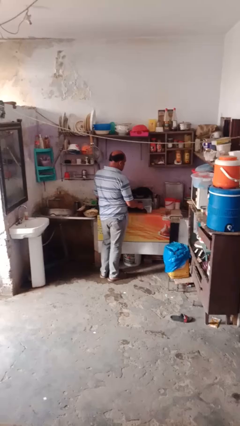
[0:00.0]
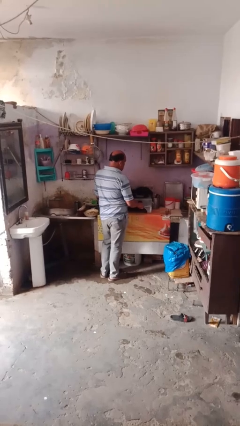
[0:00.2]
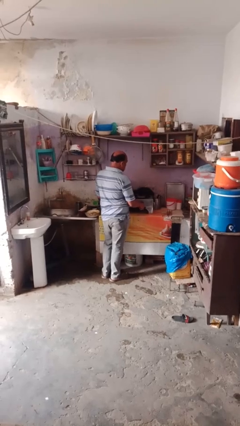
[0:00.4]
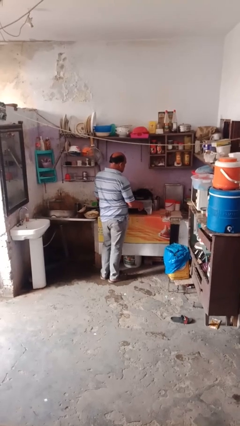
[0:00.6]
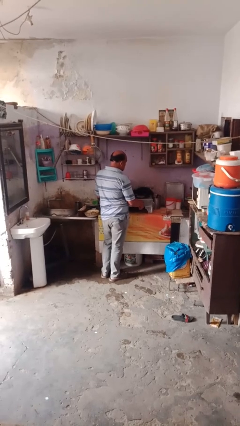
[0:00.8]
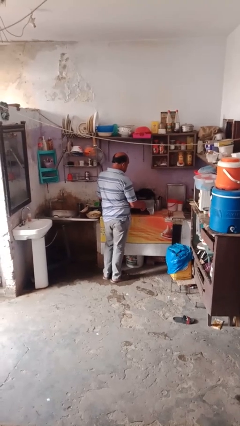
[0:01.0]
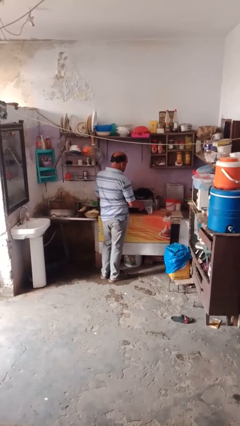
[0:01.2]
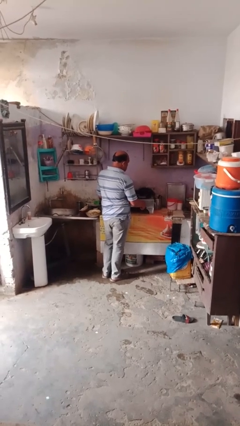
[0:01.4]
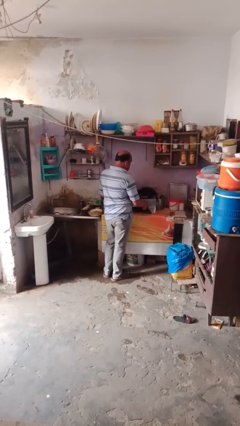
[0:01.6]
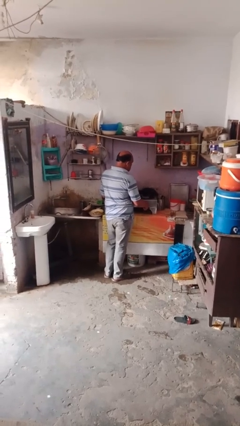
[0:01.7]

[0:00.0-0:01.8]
person turns off stovetop

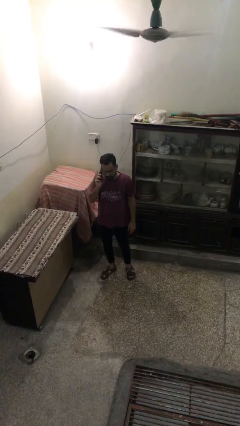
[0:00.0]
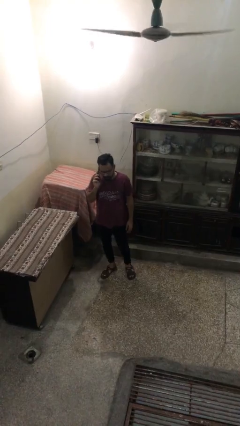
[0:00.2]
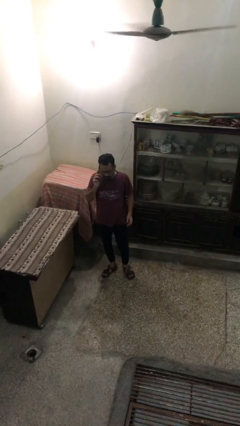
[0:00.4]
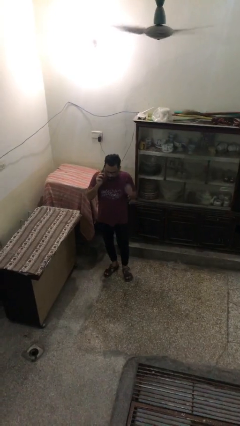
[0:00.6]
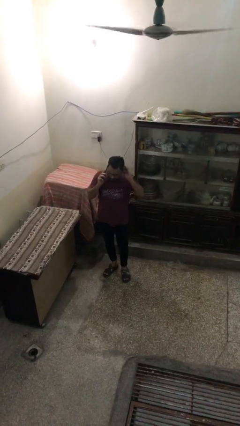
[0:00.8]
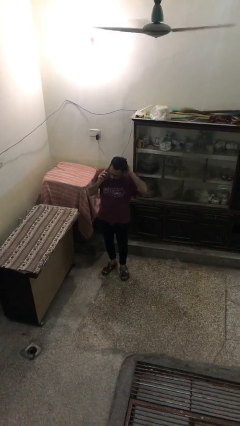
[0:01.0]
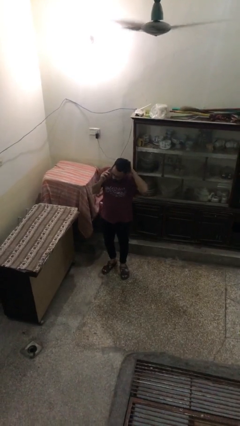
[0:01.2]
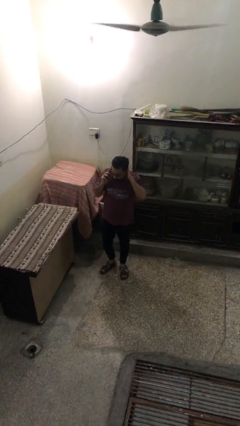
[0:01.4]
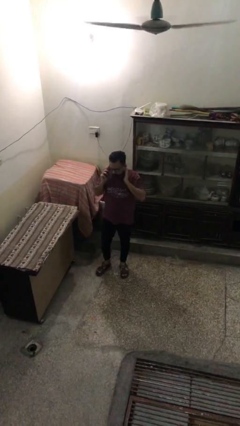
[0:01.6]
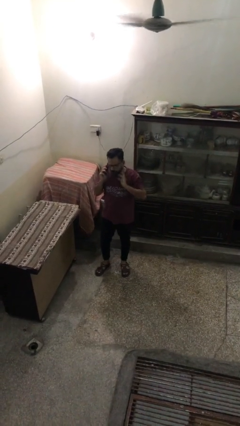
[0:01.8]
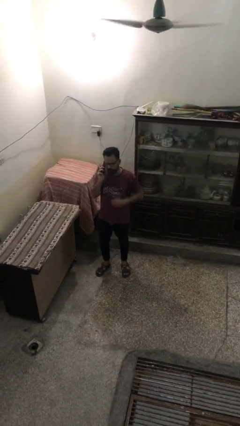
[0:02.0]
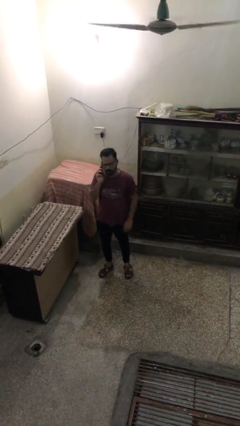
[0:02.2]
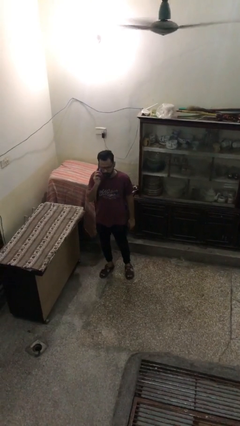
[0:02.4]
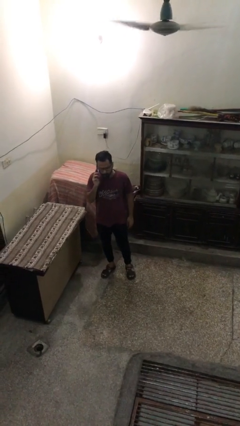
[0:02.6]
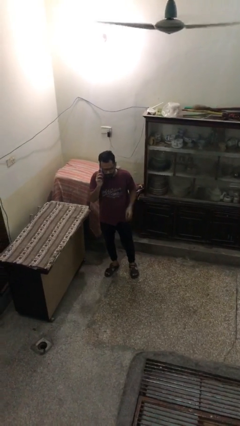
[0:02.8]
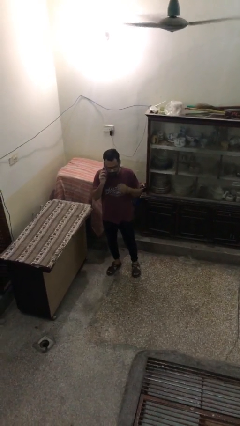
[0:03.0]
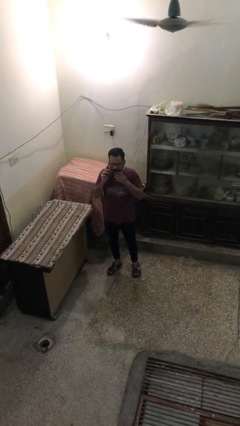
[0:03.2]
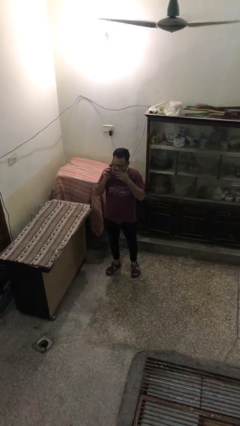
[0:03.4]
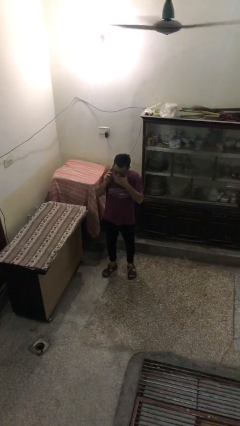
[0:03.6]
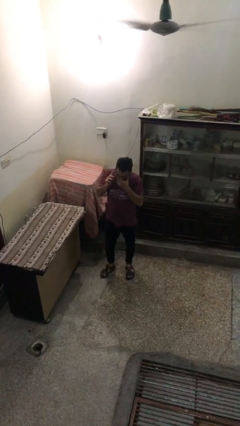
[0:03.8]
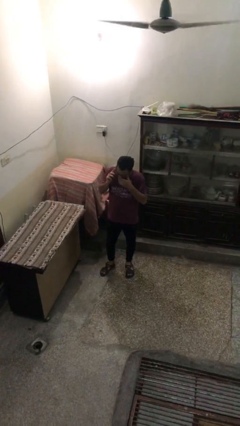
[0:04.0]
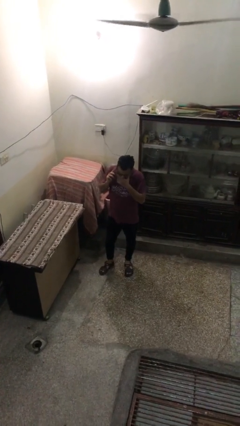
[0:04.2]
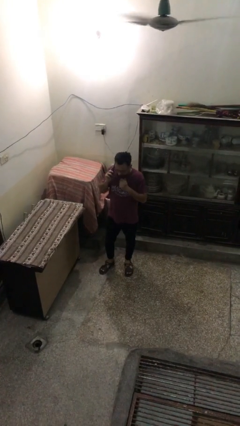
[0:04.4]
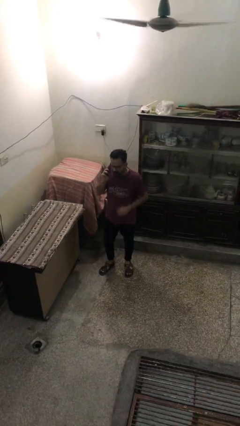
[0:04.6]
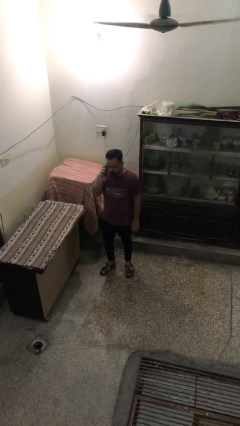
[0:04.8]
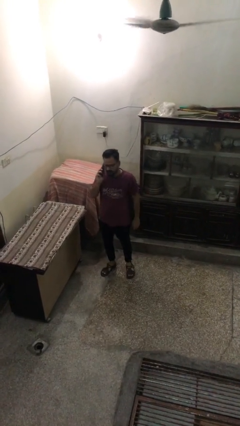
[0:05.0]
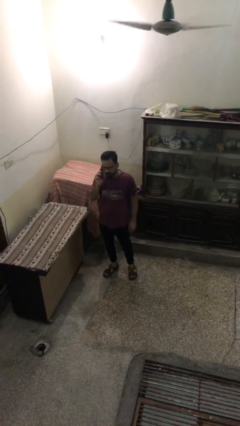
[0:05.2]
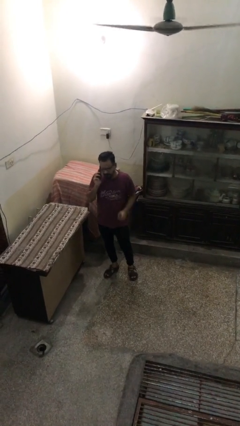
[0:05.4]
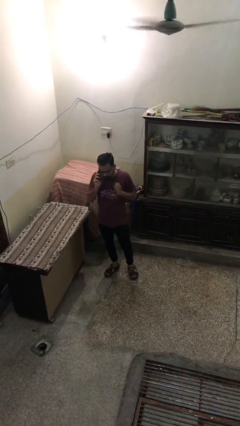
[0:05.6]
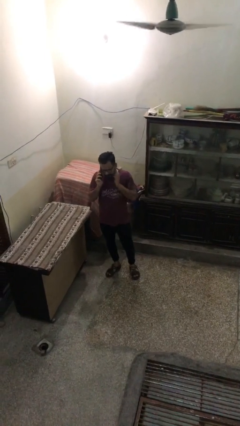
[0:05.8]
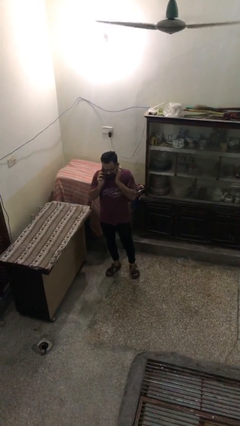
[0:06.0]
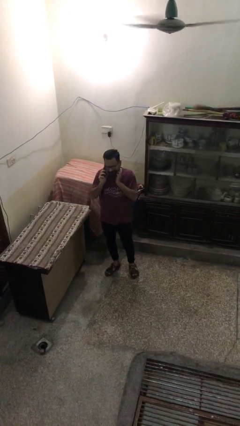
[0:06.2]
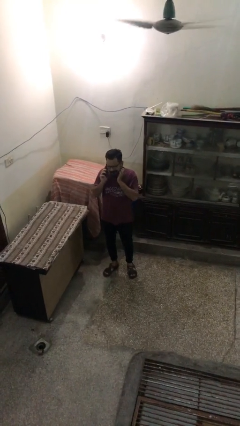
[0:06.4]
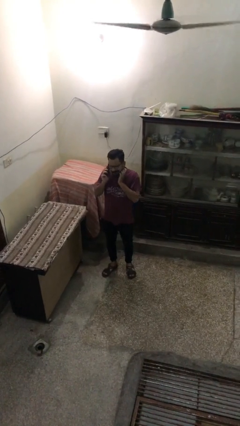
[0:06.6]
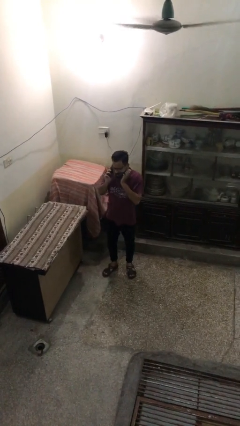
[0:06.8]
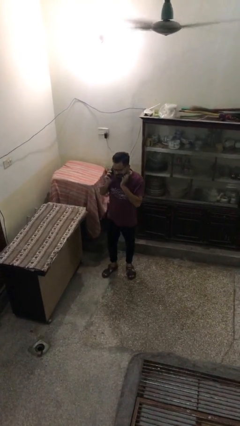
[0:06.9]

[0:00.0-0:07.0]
person talks on phone

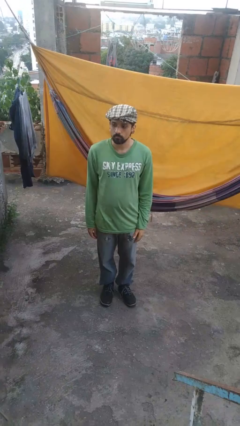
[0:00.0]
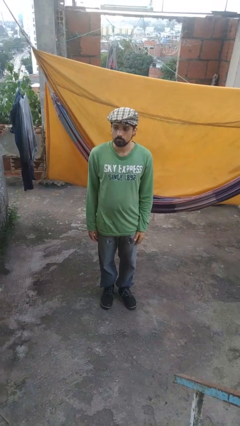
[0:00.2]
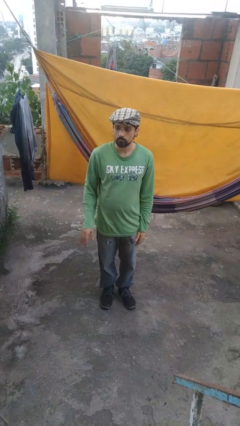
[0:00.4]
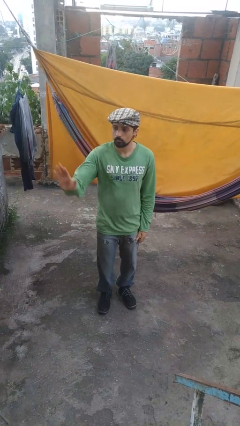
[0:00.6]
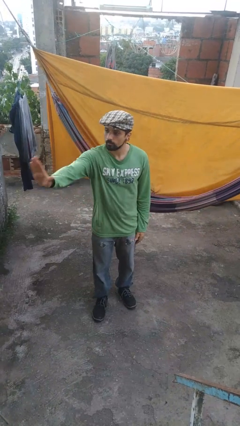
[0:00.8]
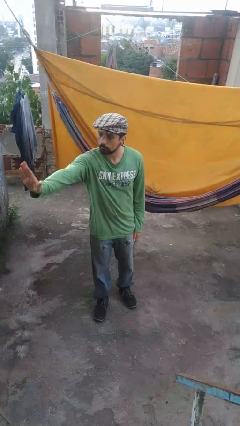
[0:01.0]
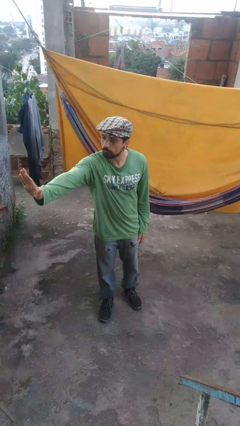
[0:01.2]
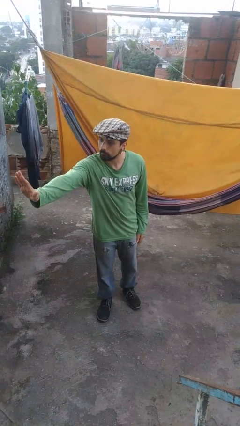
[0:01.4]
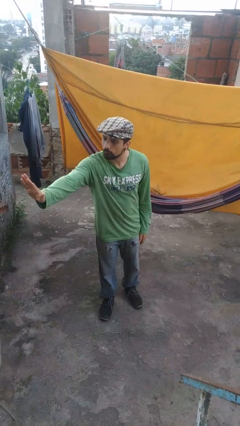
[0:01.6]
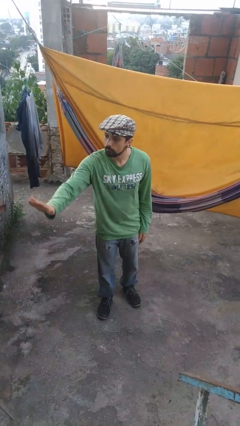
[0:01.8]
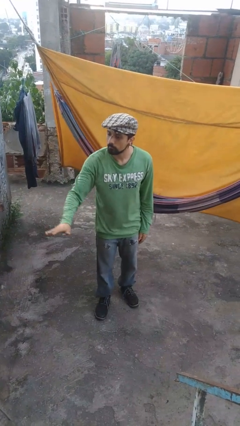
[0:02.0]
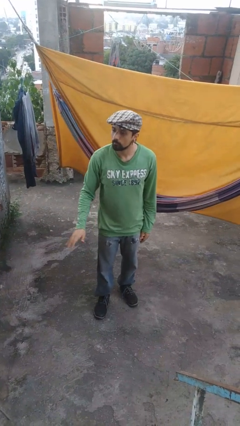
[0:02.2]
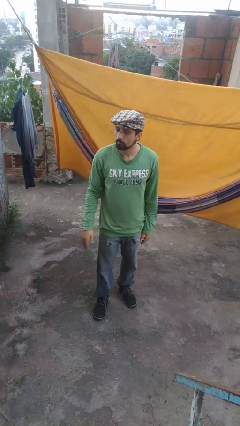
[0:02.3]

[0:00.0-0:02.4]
person gestures stop

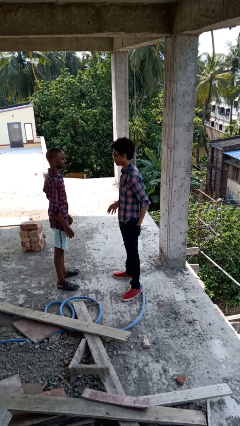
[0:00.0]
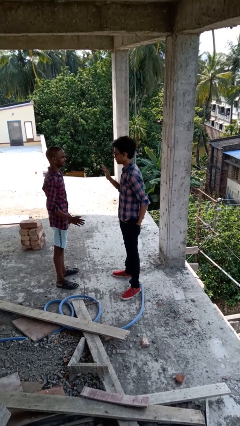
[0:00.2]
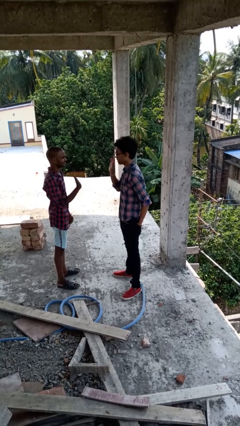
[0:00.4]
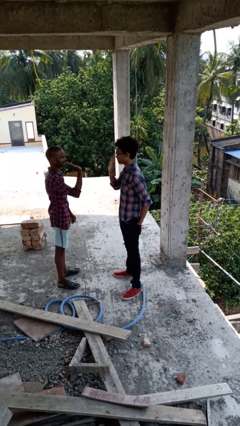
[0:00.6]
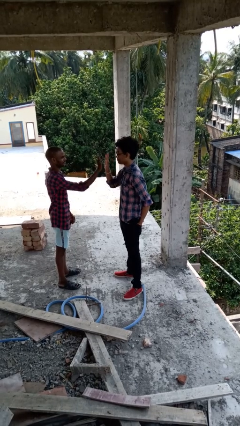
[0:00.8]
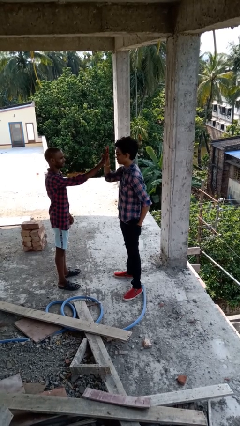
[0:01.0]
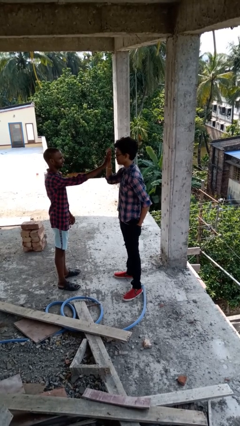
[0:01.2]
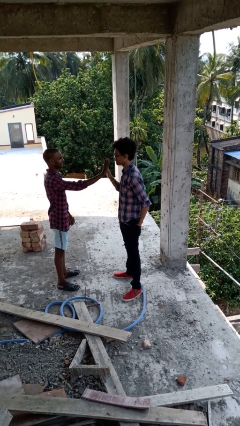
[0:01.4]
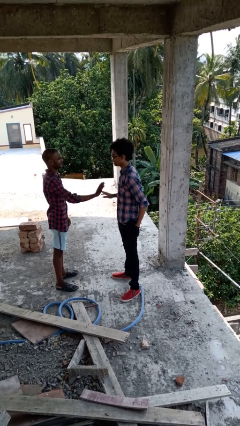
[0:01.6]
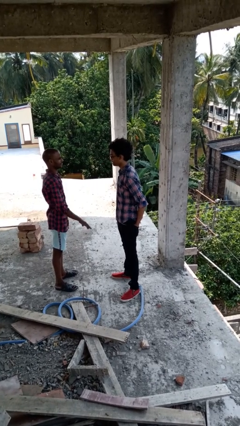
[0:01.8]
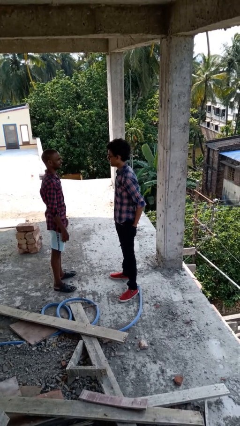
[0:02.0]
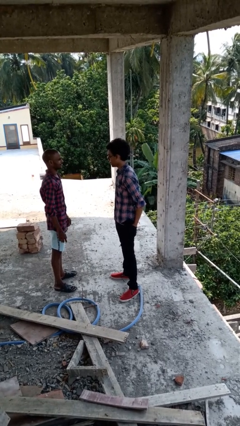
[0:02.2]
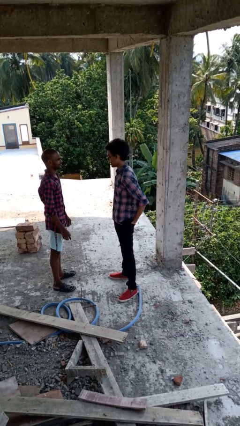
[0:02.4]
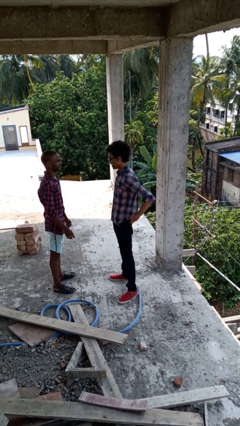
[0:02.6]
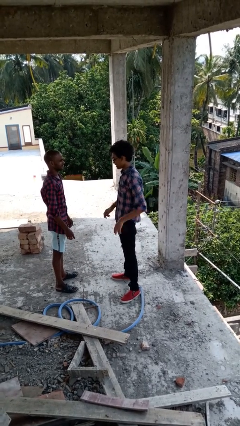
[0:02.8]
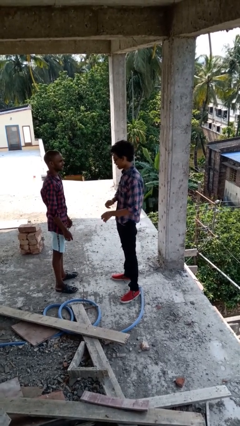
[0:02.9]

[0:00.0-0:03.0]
person highfives hand

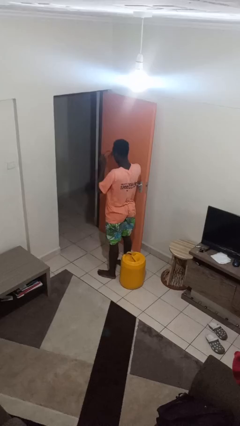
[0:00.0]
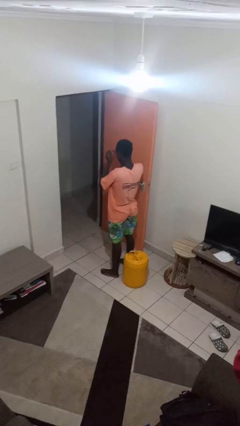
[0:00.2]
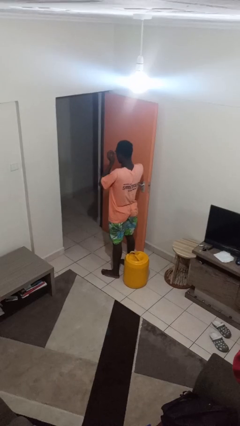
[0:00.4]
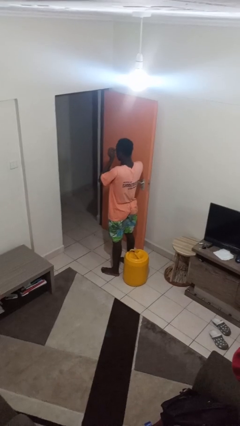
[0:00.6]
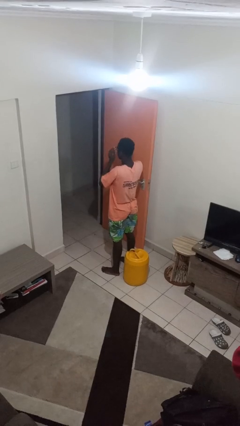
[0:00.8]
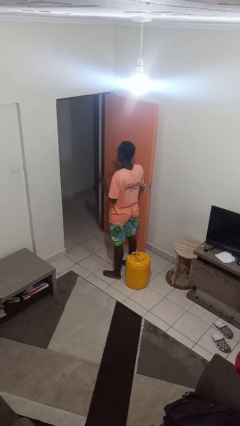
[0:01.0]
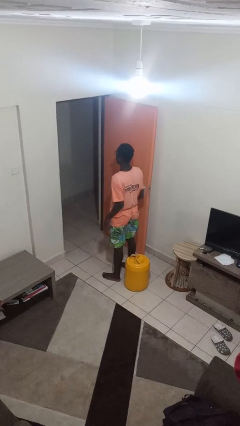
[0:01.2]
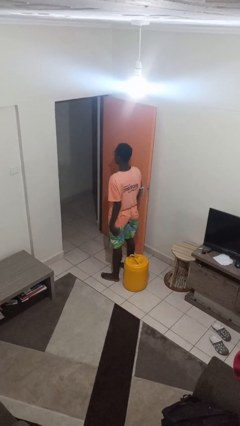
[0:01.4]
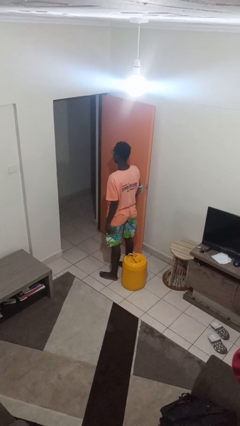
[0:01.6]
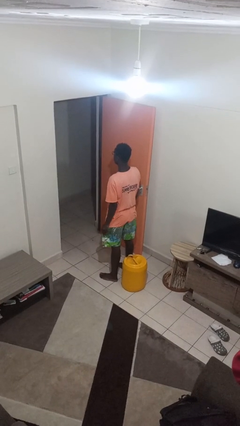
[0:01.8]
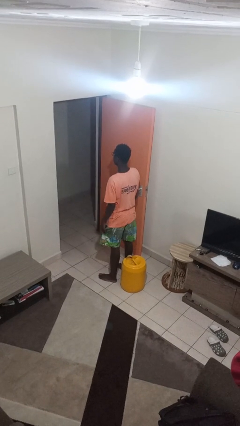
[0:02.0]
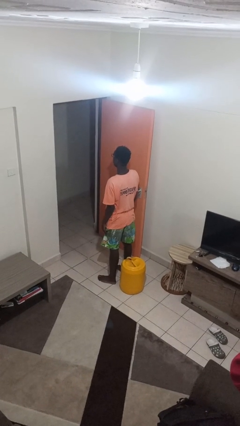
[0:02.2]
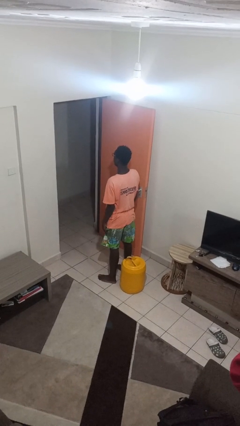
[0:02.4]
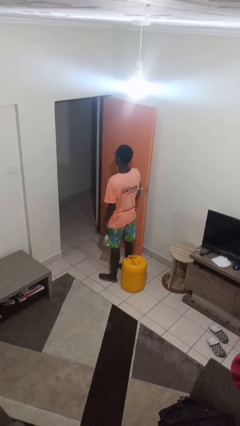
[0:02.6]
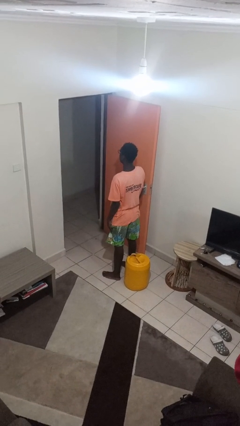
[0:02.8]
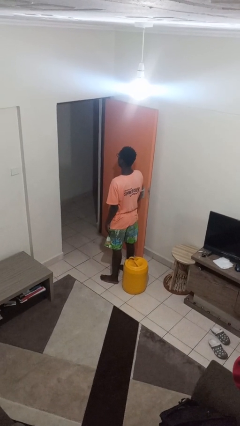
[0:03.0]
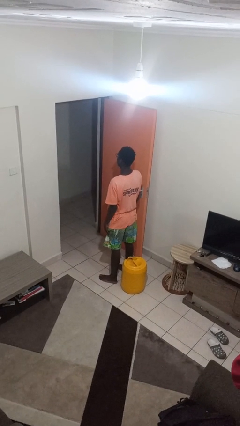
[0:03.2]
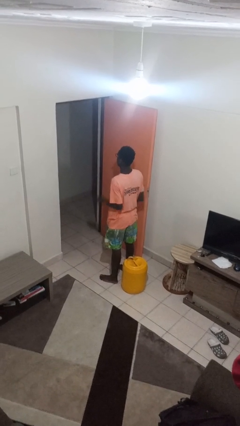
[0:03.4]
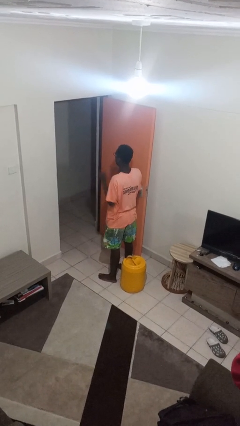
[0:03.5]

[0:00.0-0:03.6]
person puts on glasses
